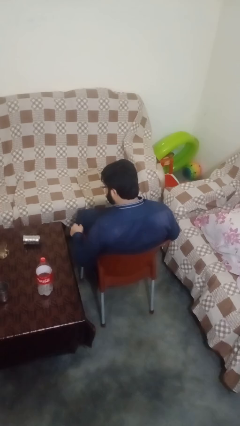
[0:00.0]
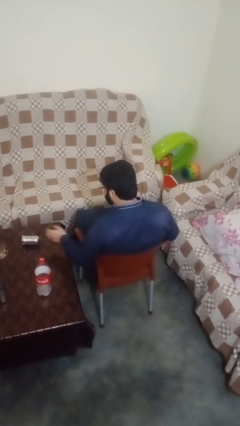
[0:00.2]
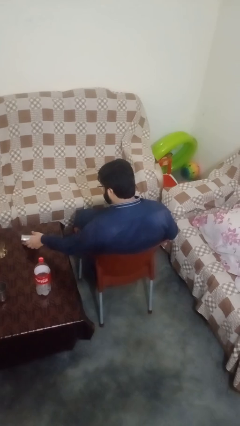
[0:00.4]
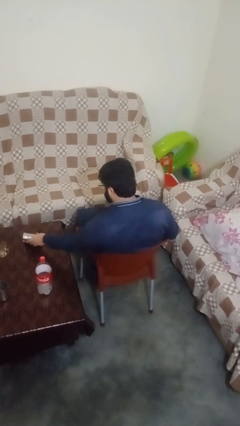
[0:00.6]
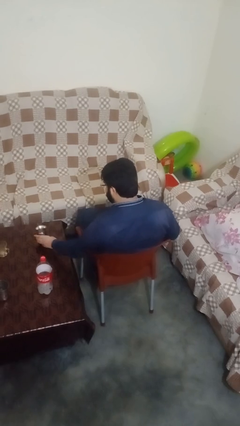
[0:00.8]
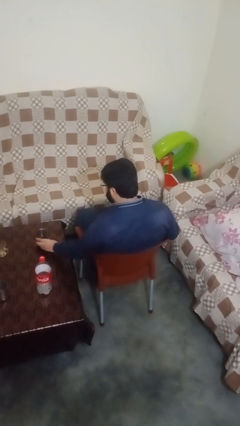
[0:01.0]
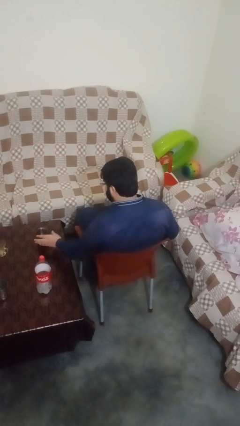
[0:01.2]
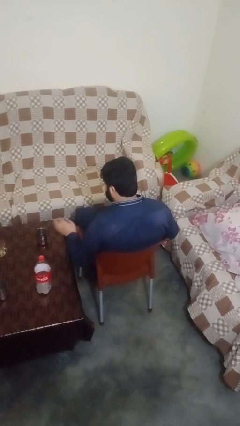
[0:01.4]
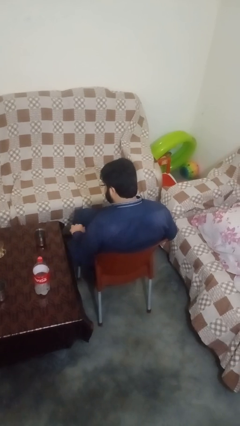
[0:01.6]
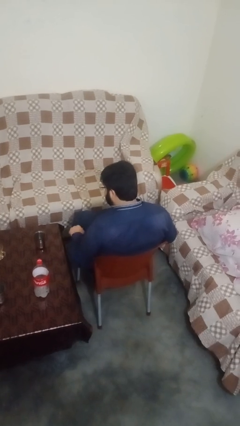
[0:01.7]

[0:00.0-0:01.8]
person sets upright glass

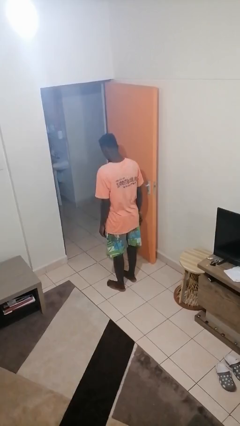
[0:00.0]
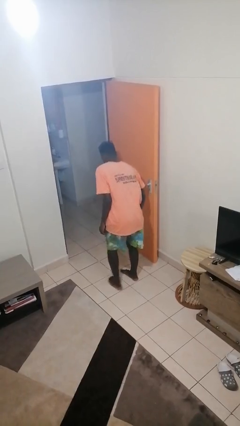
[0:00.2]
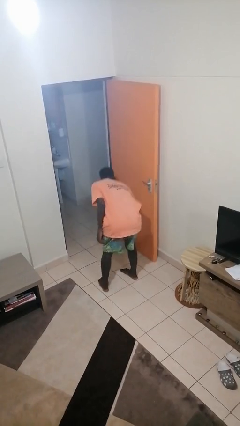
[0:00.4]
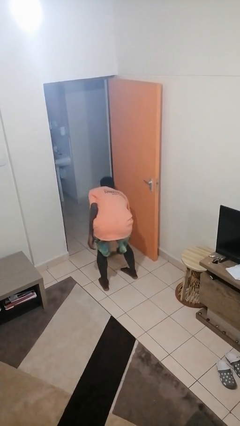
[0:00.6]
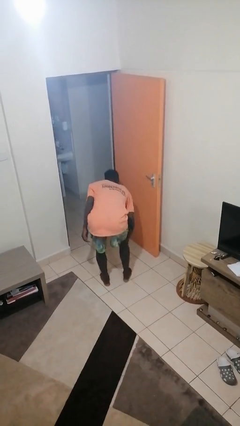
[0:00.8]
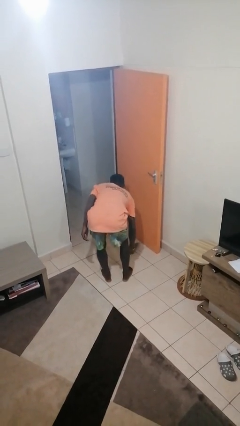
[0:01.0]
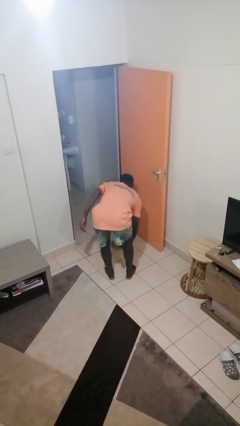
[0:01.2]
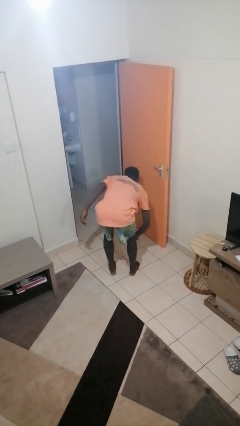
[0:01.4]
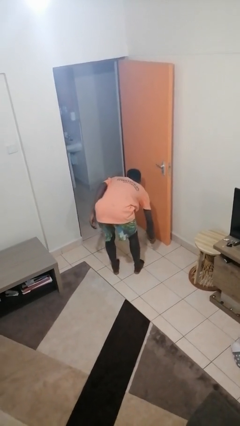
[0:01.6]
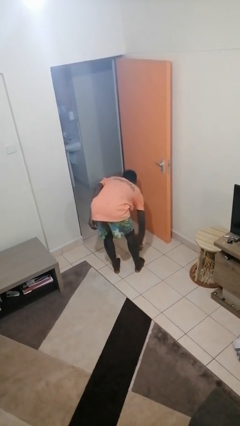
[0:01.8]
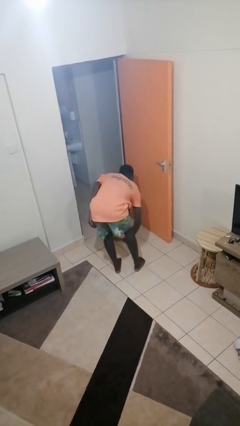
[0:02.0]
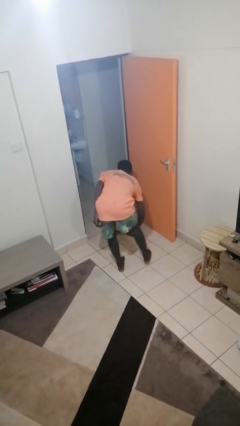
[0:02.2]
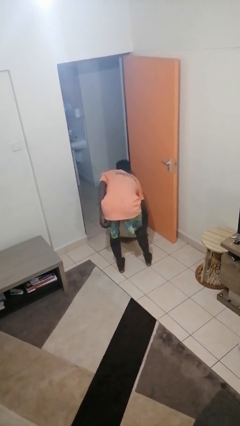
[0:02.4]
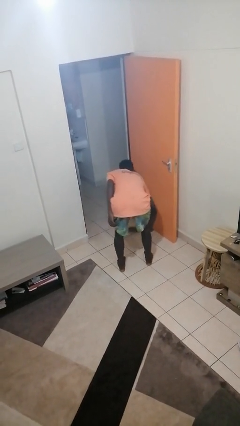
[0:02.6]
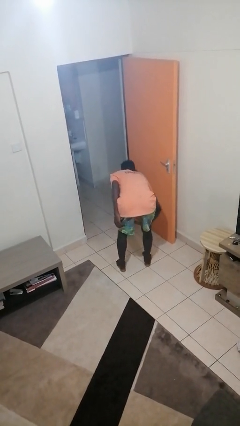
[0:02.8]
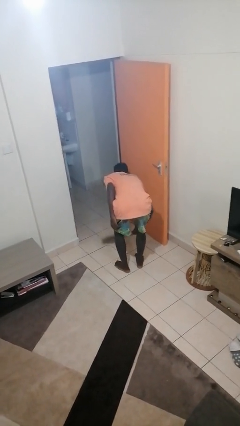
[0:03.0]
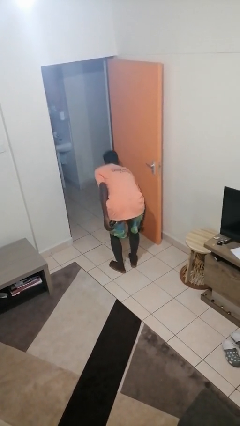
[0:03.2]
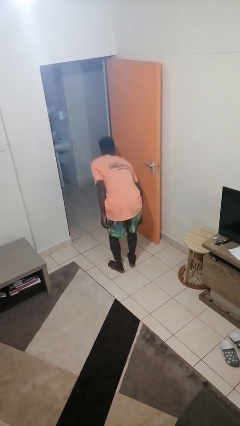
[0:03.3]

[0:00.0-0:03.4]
person sweeps floor

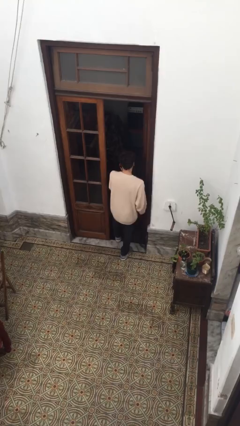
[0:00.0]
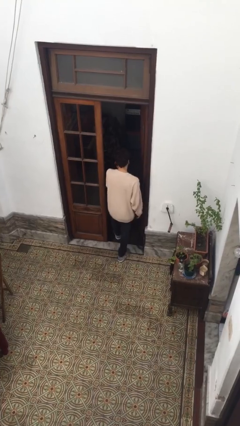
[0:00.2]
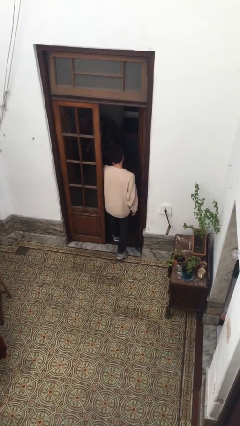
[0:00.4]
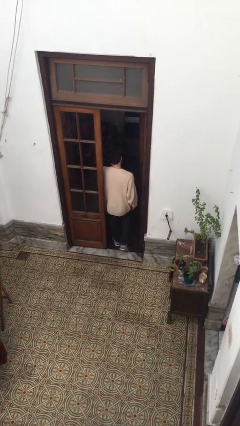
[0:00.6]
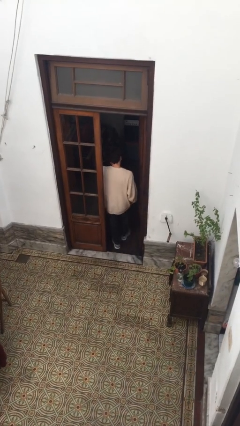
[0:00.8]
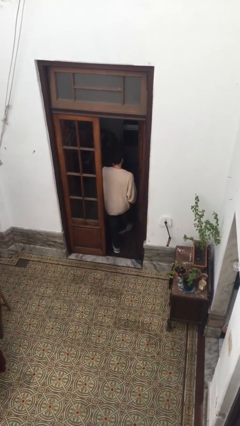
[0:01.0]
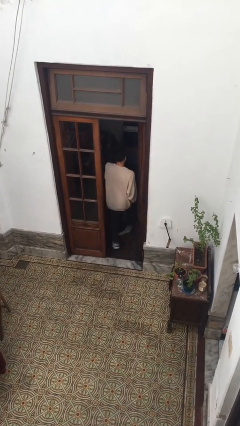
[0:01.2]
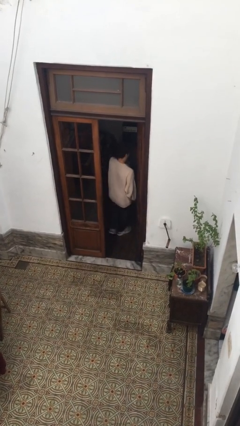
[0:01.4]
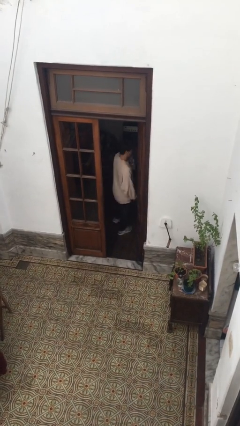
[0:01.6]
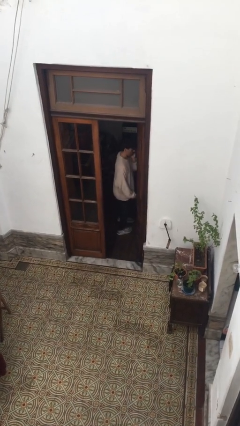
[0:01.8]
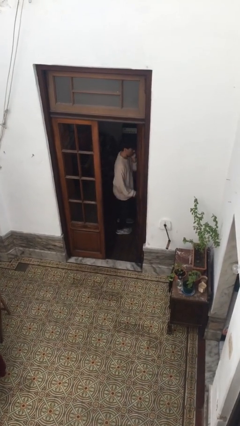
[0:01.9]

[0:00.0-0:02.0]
person exits scene through structure

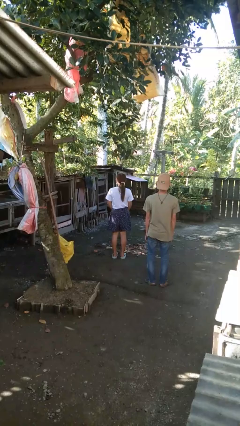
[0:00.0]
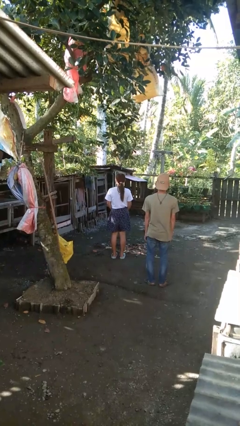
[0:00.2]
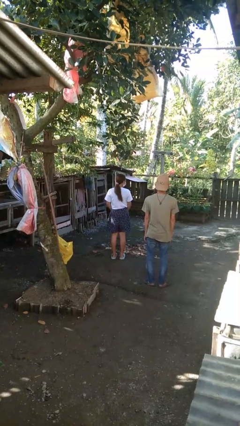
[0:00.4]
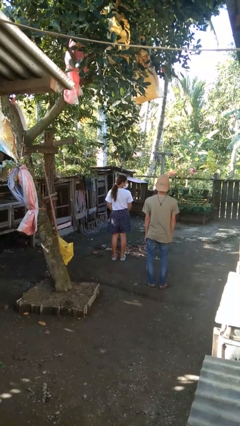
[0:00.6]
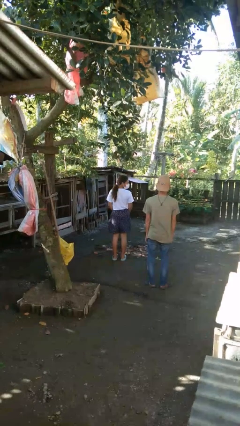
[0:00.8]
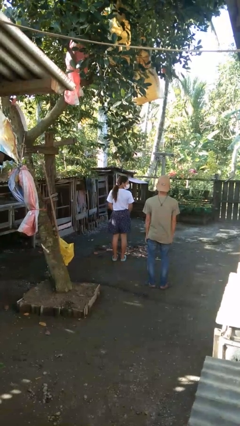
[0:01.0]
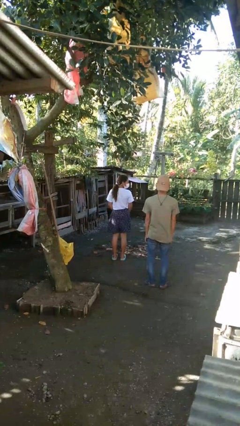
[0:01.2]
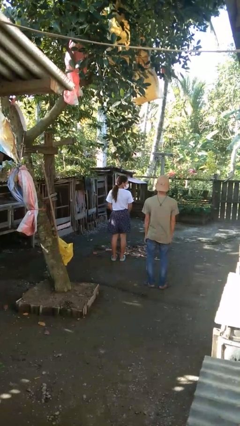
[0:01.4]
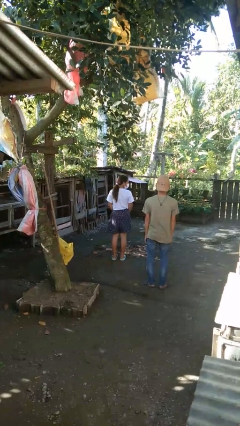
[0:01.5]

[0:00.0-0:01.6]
person looks over shoulder

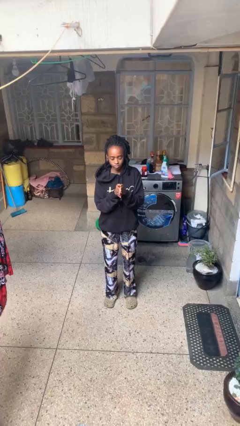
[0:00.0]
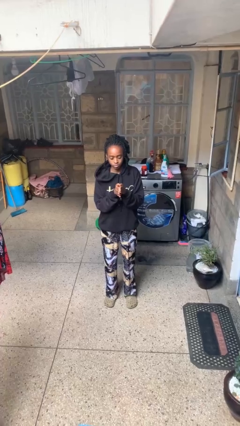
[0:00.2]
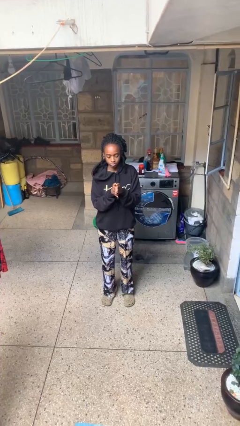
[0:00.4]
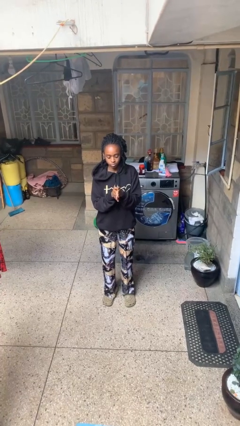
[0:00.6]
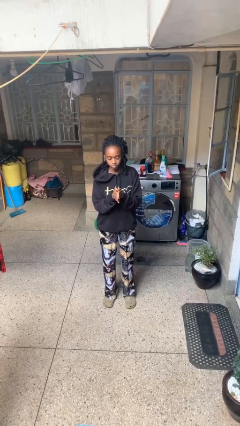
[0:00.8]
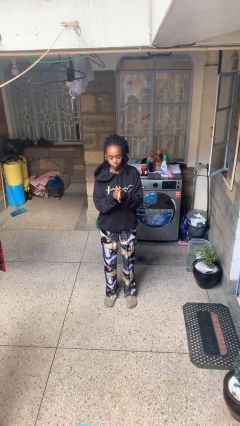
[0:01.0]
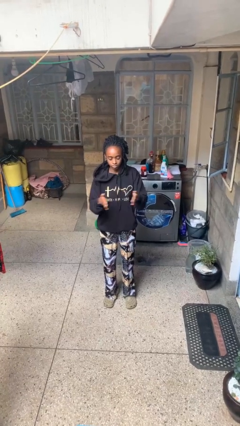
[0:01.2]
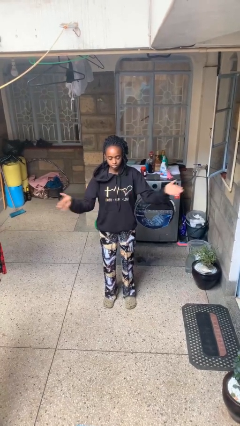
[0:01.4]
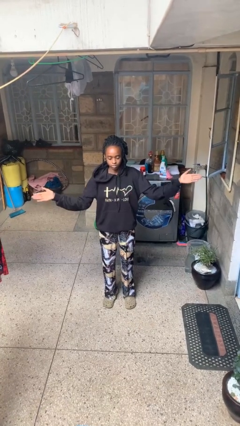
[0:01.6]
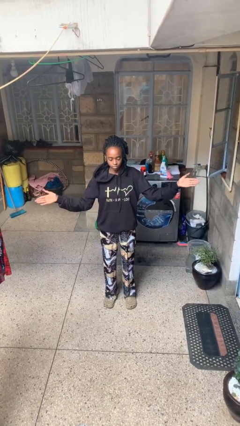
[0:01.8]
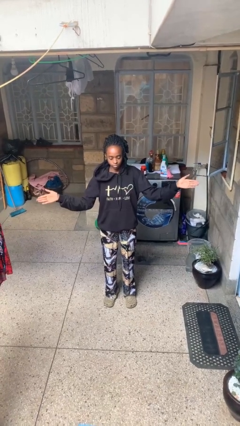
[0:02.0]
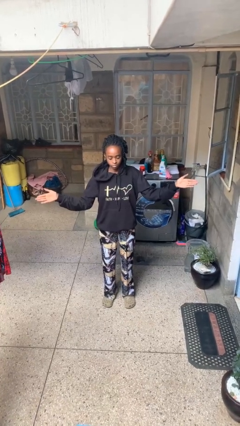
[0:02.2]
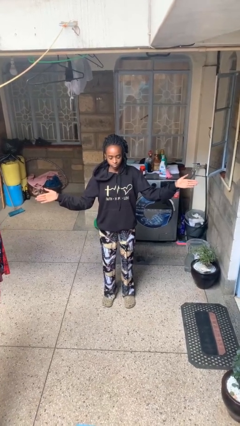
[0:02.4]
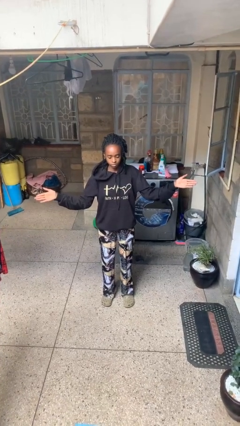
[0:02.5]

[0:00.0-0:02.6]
person gestures zoom in

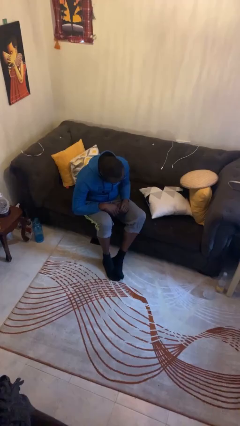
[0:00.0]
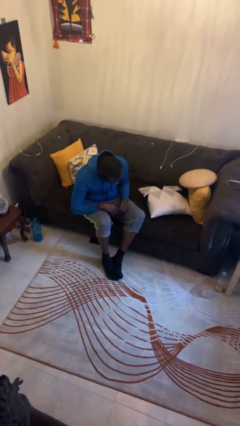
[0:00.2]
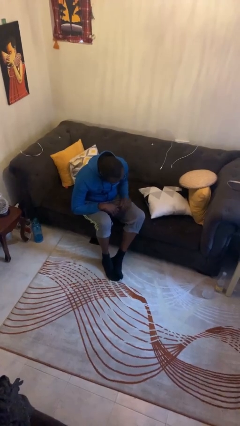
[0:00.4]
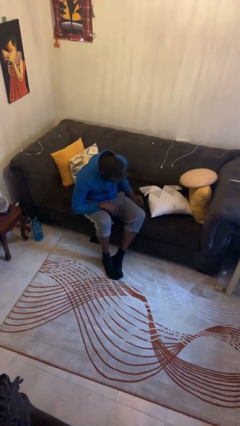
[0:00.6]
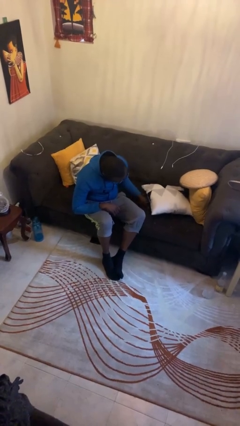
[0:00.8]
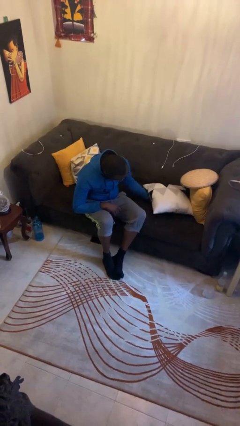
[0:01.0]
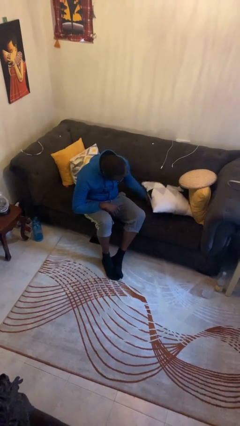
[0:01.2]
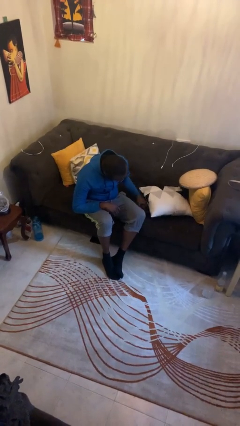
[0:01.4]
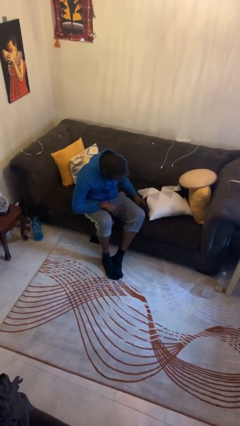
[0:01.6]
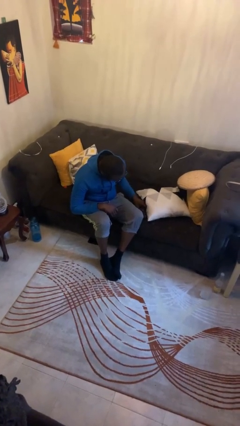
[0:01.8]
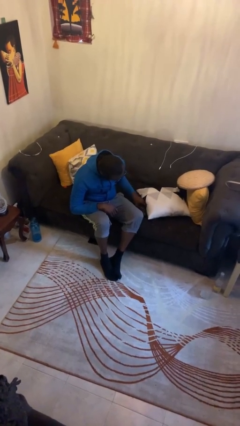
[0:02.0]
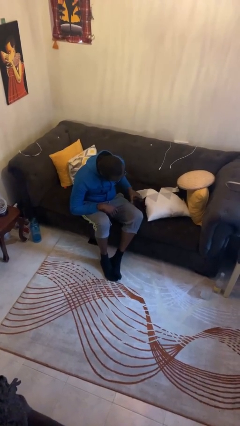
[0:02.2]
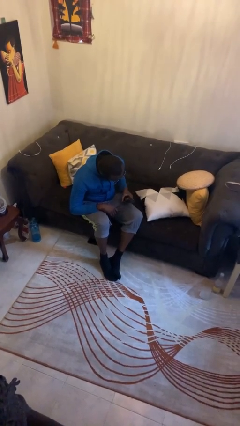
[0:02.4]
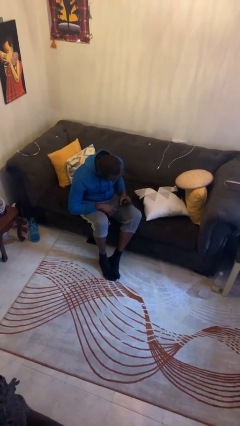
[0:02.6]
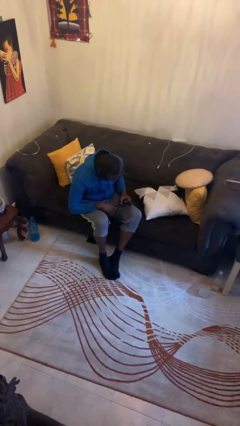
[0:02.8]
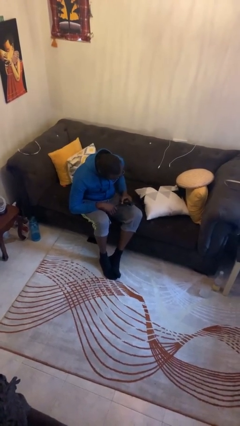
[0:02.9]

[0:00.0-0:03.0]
person searches in couch

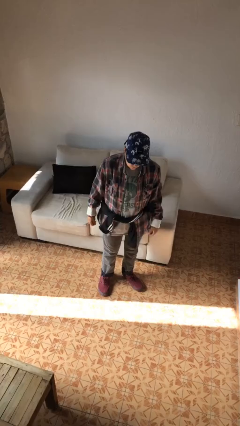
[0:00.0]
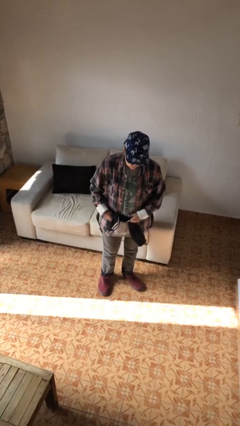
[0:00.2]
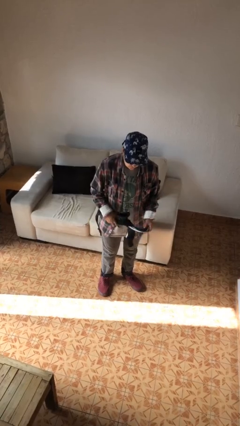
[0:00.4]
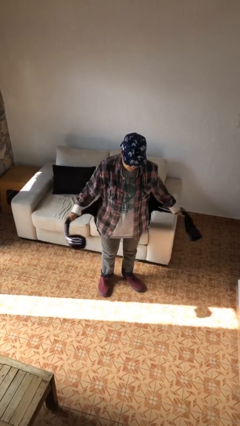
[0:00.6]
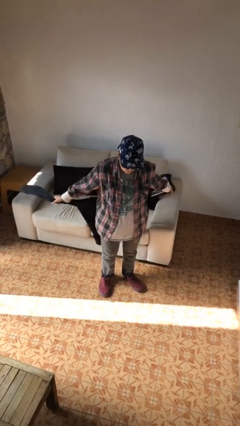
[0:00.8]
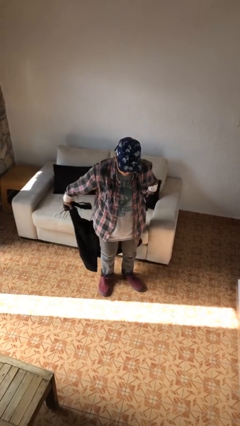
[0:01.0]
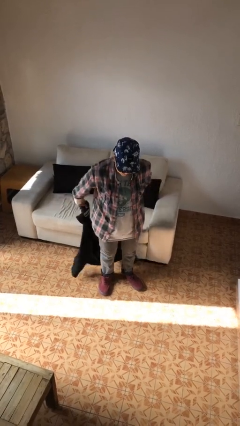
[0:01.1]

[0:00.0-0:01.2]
person unties jacket around waist

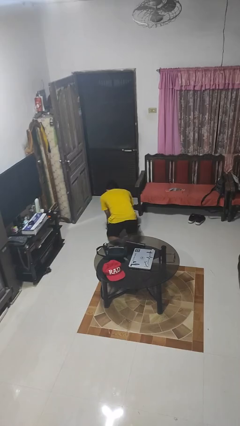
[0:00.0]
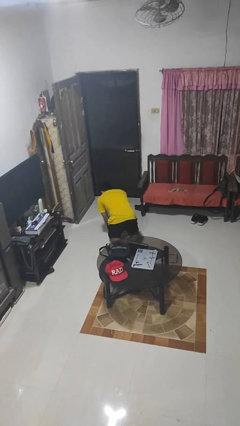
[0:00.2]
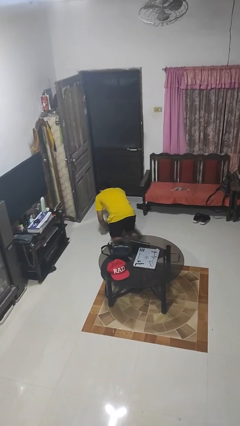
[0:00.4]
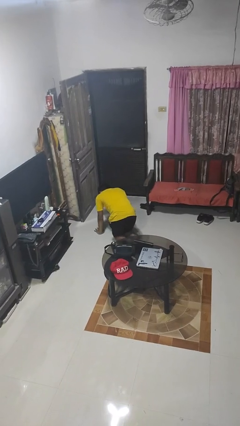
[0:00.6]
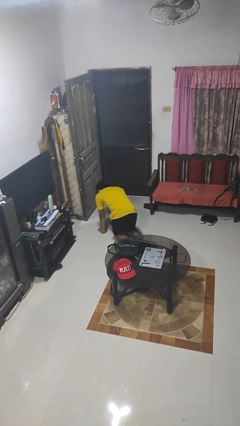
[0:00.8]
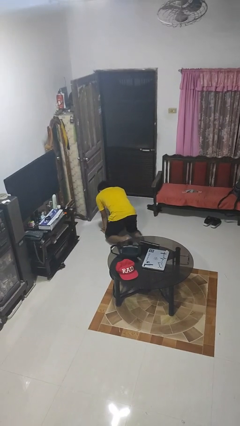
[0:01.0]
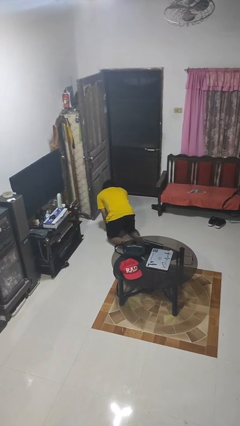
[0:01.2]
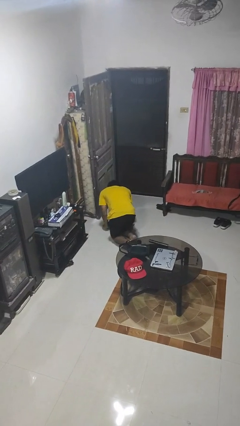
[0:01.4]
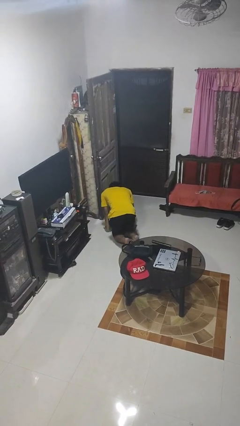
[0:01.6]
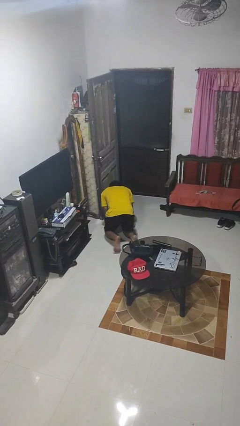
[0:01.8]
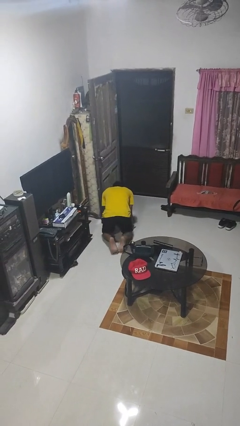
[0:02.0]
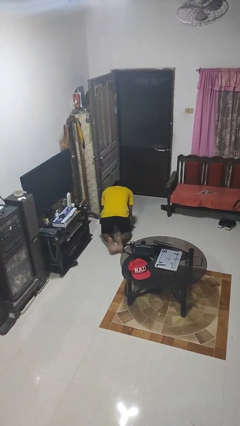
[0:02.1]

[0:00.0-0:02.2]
person crawls
